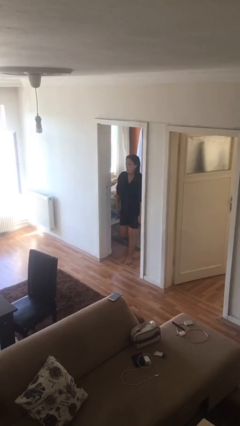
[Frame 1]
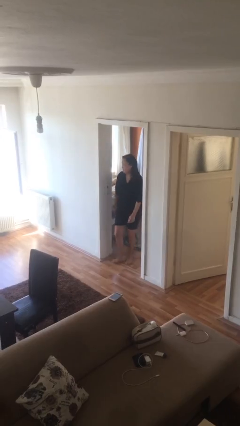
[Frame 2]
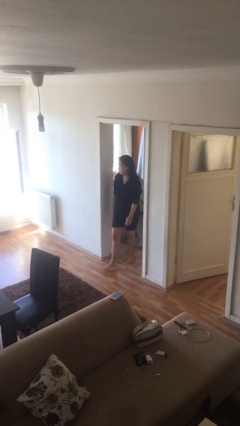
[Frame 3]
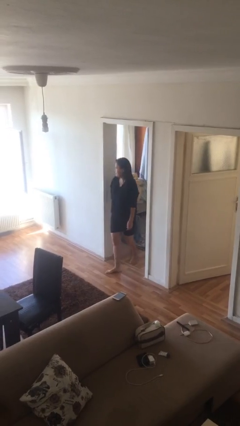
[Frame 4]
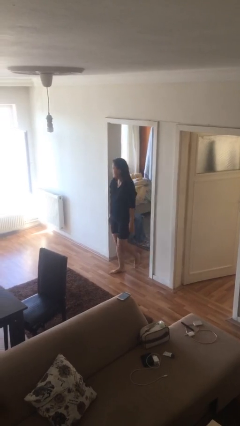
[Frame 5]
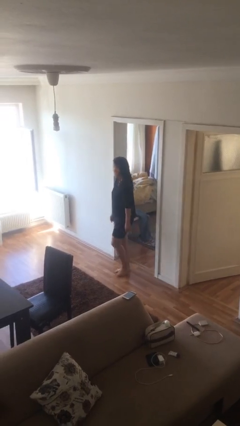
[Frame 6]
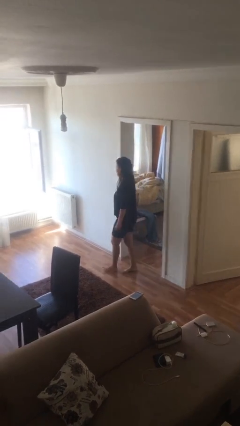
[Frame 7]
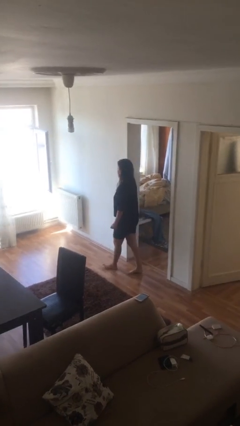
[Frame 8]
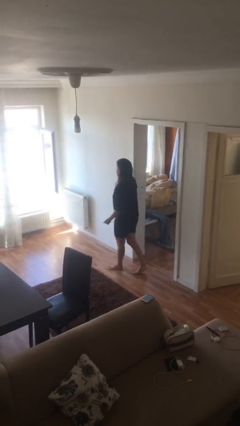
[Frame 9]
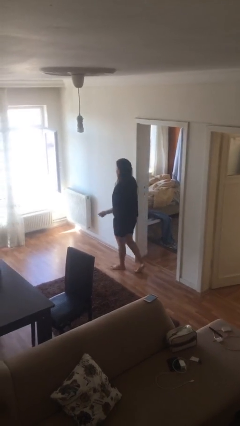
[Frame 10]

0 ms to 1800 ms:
person enters scene through structure

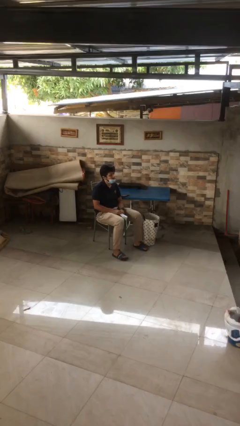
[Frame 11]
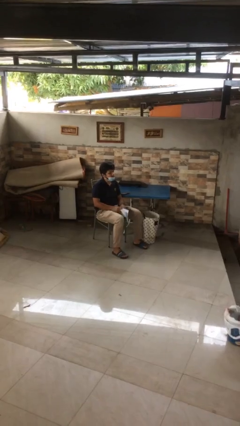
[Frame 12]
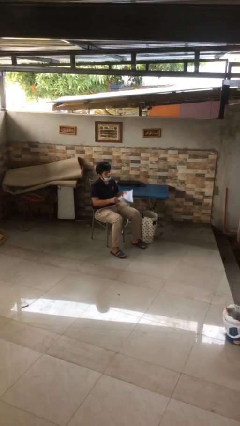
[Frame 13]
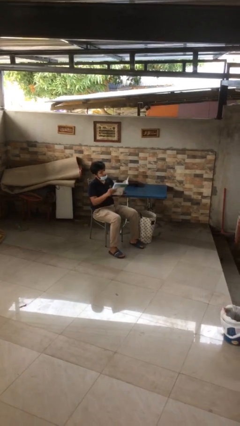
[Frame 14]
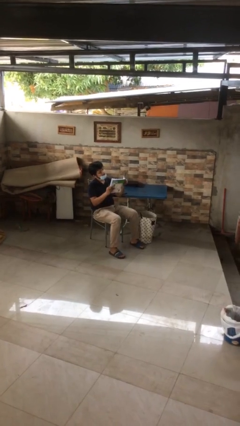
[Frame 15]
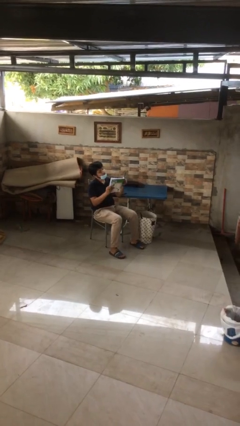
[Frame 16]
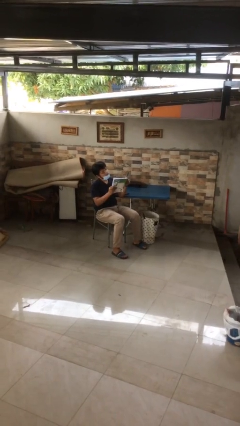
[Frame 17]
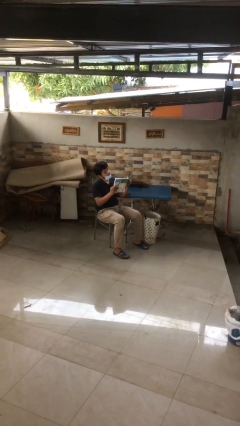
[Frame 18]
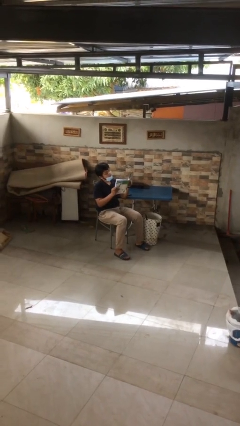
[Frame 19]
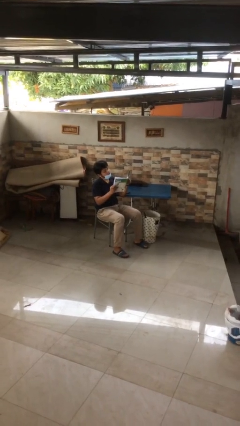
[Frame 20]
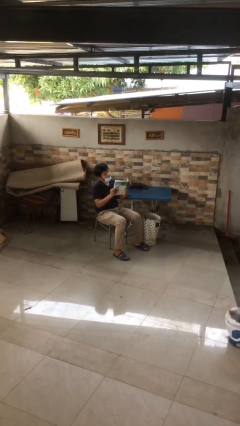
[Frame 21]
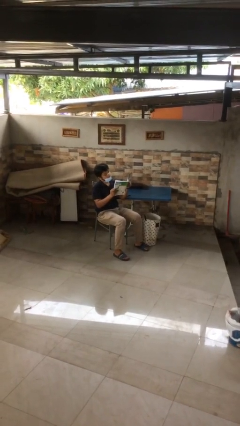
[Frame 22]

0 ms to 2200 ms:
person reads magazine

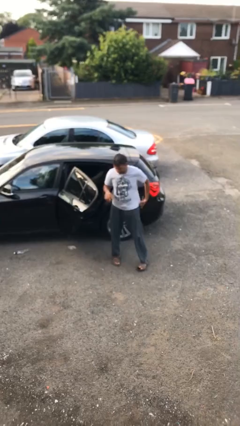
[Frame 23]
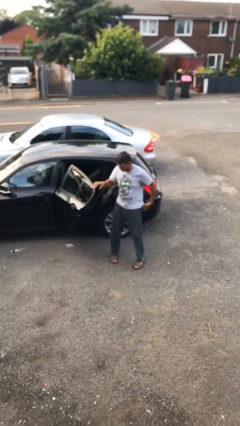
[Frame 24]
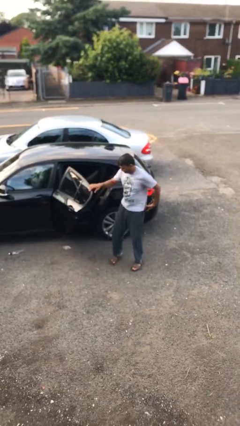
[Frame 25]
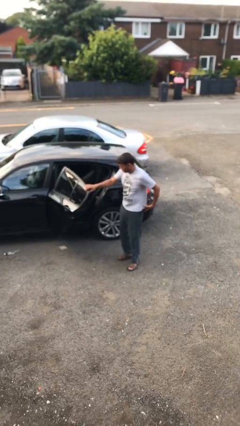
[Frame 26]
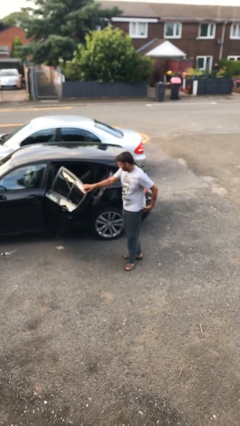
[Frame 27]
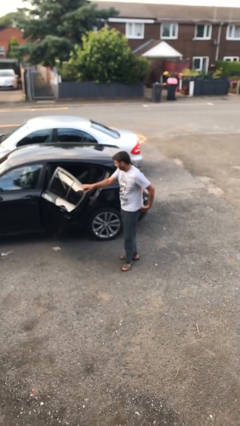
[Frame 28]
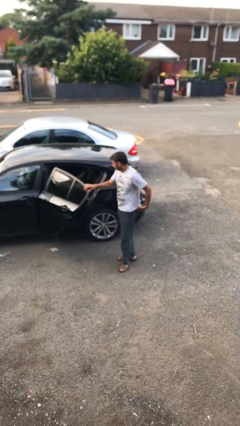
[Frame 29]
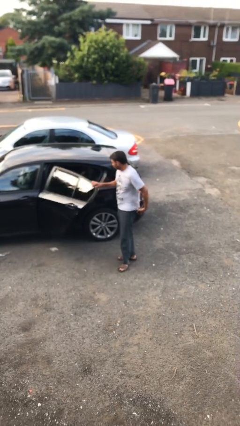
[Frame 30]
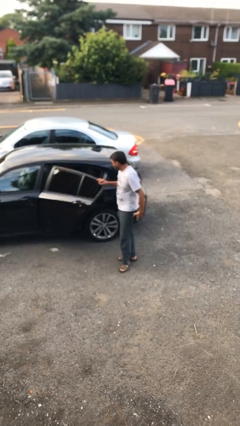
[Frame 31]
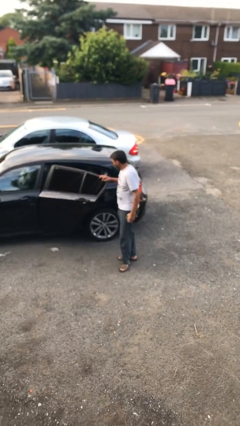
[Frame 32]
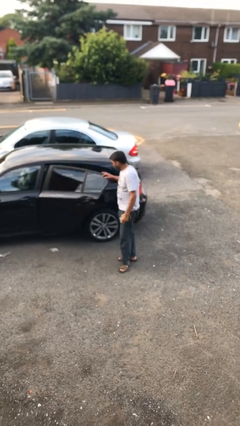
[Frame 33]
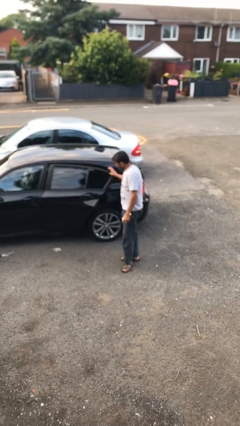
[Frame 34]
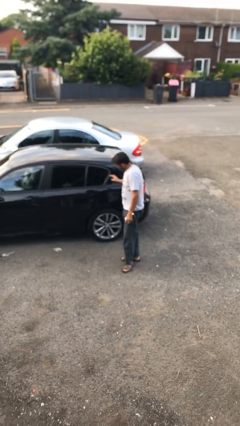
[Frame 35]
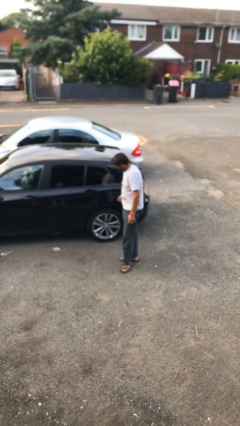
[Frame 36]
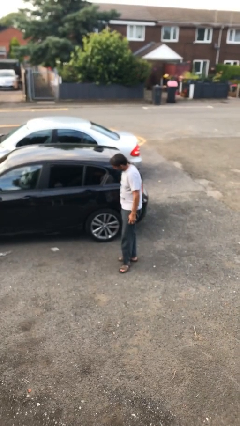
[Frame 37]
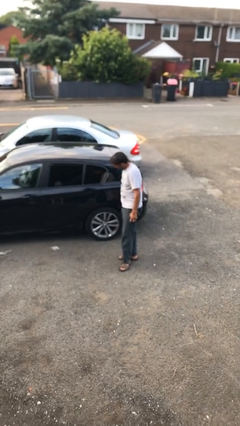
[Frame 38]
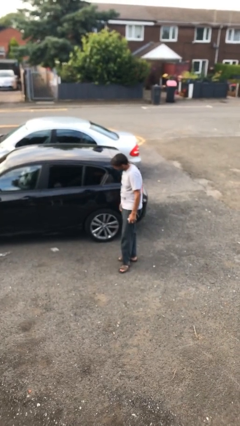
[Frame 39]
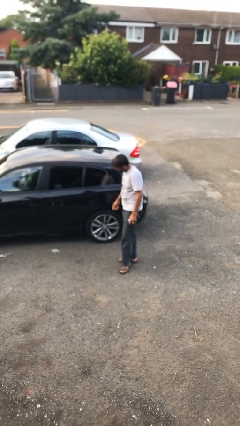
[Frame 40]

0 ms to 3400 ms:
person closes car door

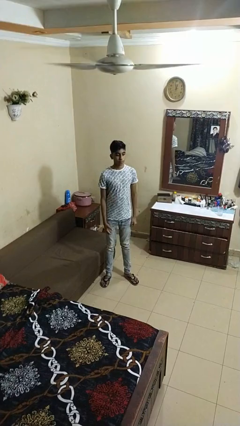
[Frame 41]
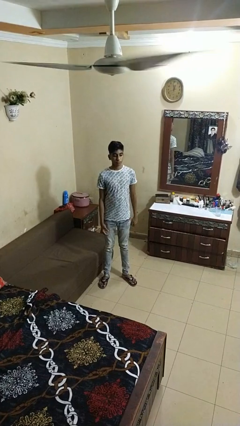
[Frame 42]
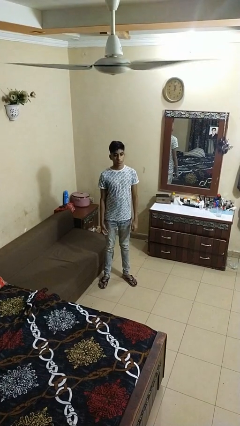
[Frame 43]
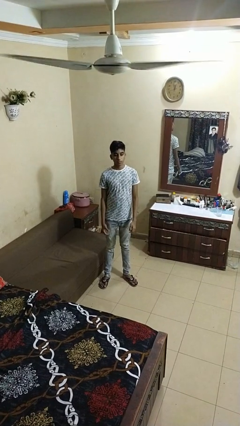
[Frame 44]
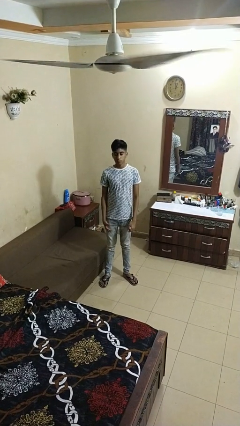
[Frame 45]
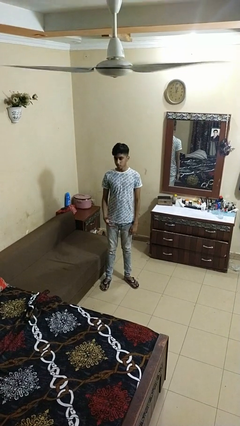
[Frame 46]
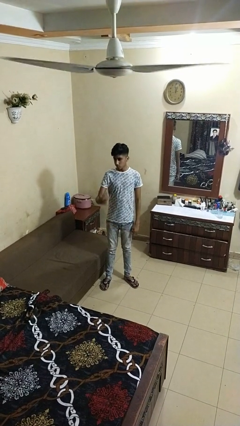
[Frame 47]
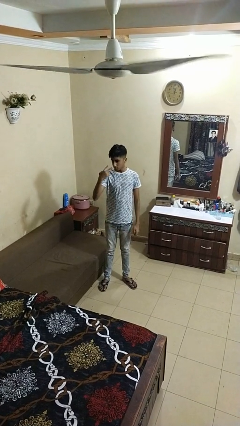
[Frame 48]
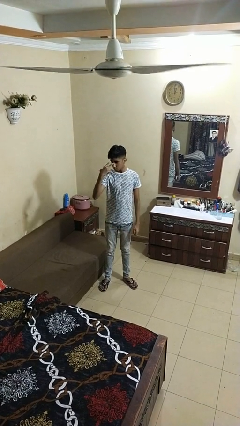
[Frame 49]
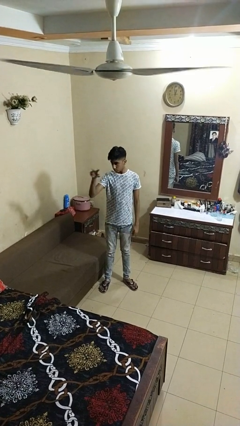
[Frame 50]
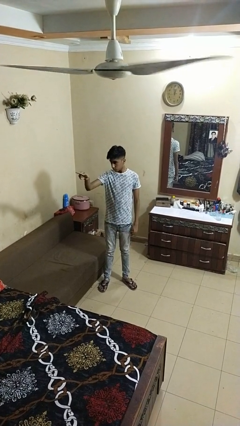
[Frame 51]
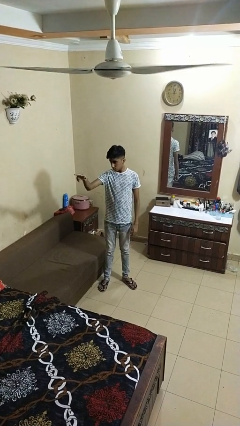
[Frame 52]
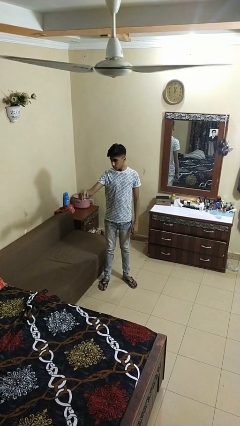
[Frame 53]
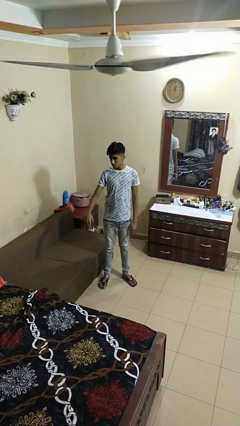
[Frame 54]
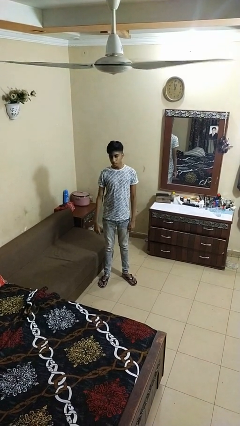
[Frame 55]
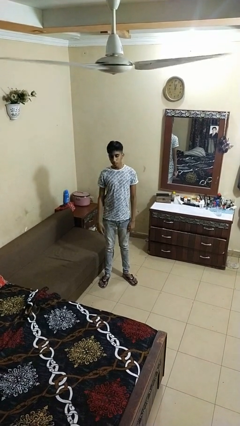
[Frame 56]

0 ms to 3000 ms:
person gestures watch closely

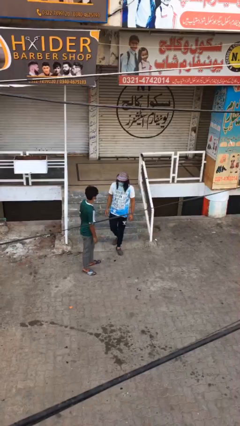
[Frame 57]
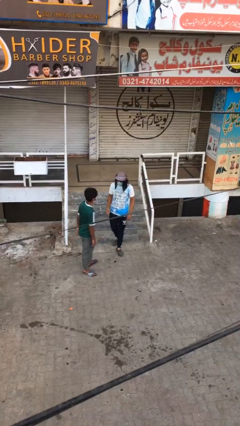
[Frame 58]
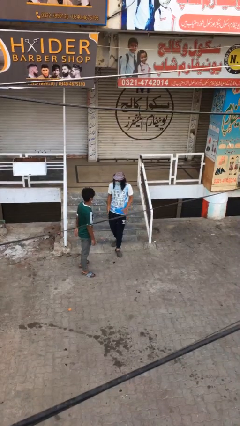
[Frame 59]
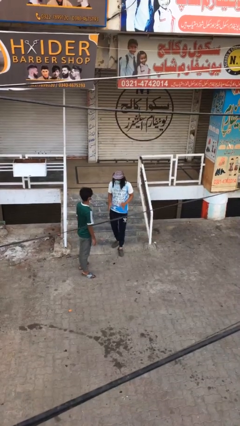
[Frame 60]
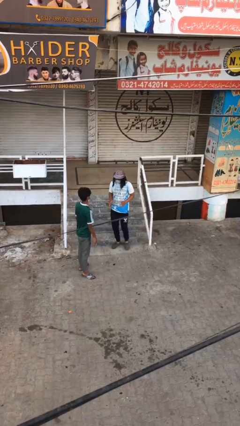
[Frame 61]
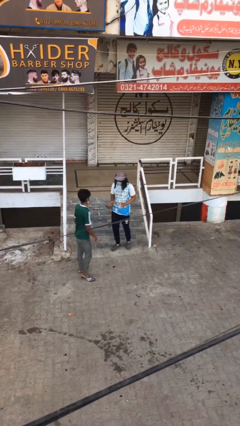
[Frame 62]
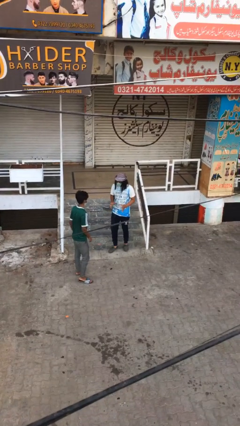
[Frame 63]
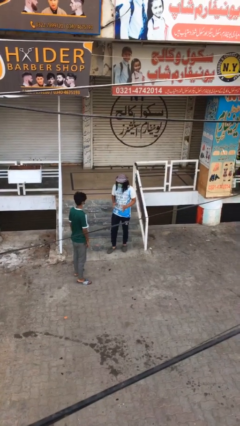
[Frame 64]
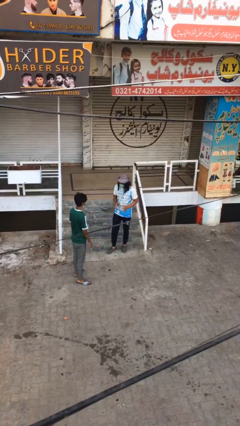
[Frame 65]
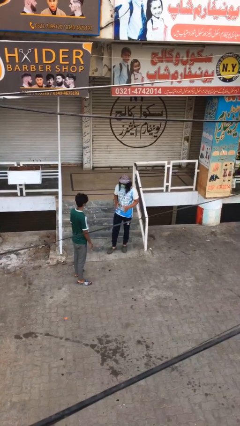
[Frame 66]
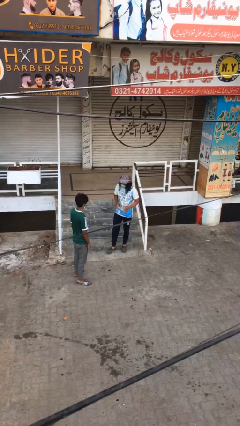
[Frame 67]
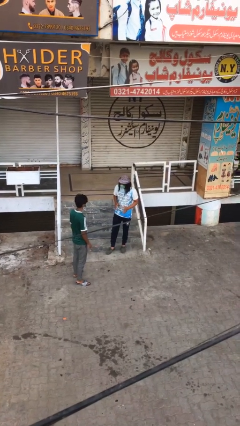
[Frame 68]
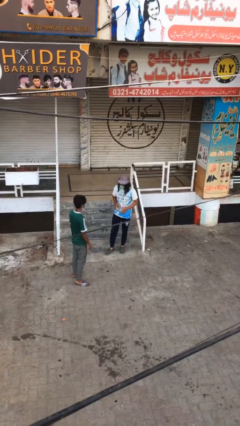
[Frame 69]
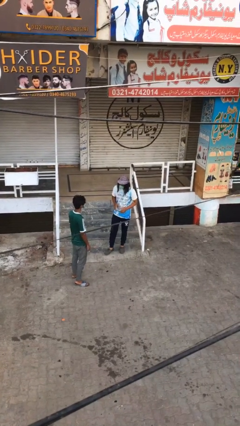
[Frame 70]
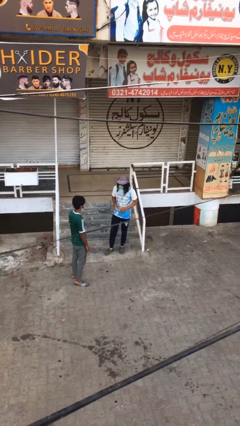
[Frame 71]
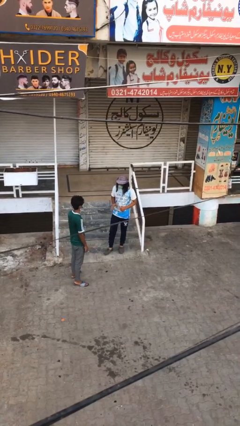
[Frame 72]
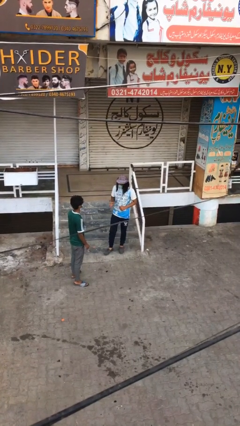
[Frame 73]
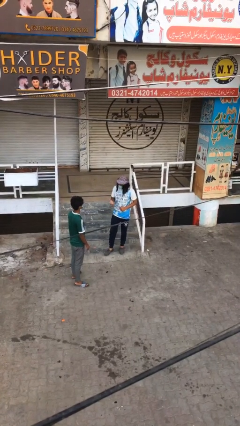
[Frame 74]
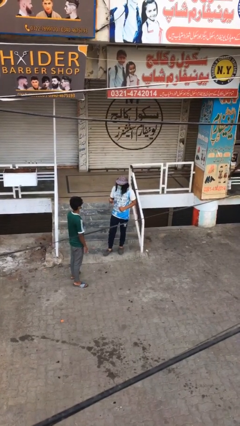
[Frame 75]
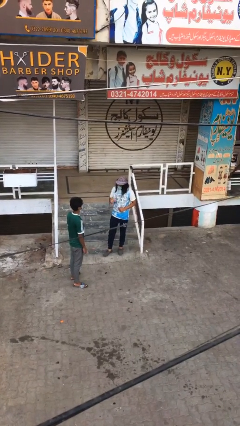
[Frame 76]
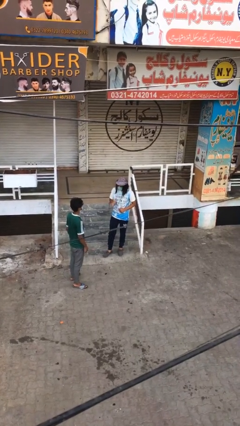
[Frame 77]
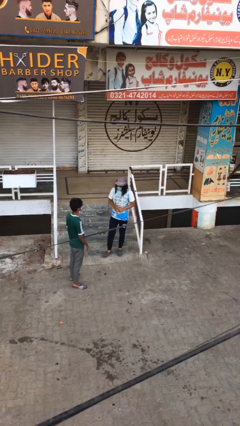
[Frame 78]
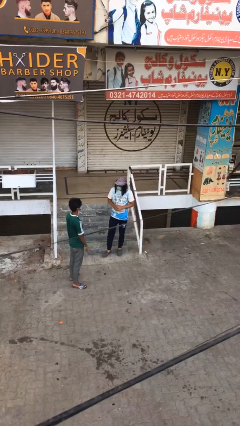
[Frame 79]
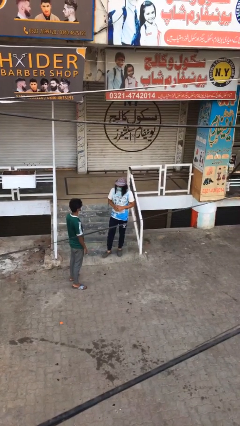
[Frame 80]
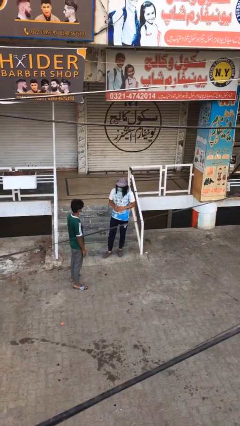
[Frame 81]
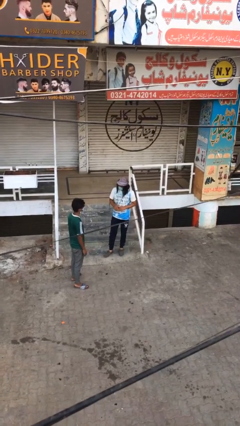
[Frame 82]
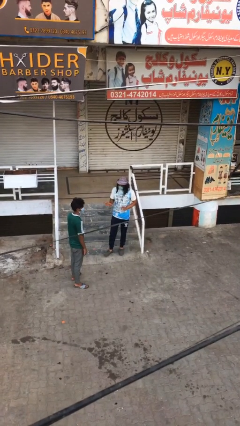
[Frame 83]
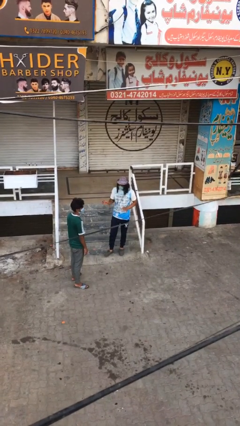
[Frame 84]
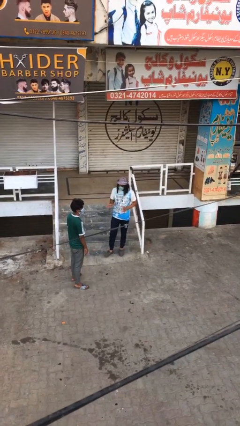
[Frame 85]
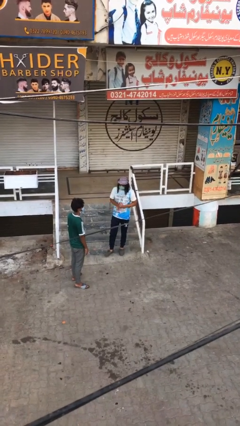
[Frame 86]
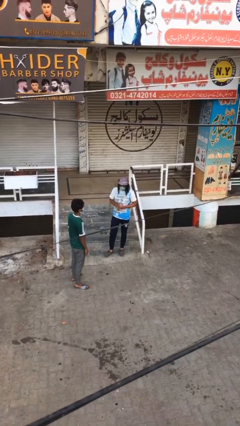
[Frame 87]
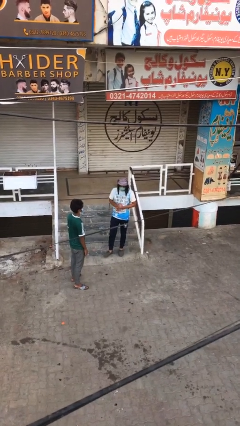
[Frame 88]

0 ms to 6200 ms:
person talks to person

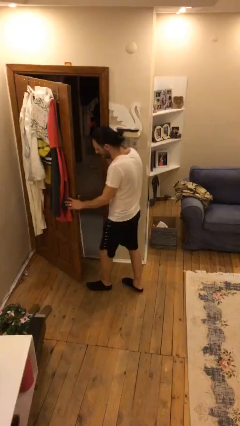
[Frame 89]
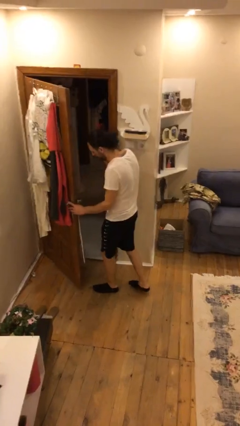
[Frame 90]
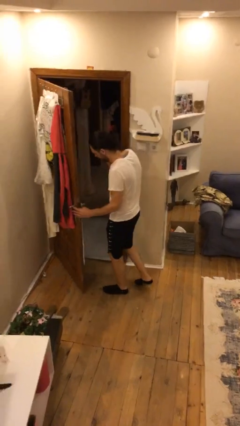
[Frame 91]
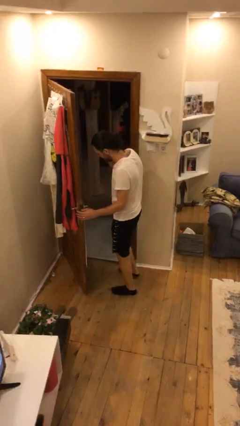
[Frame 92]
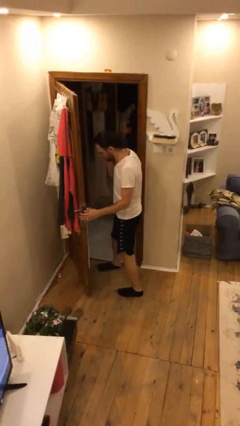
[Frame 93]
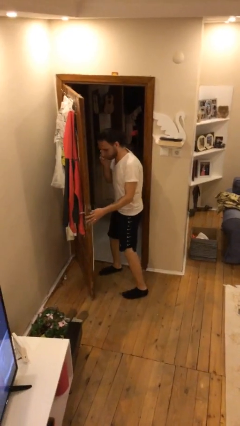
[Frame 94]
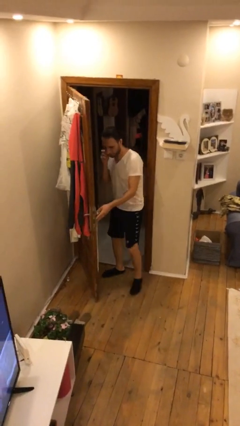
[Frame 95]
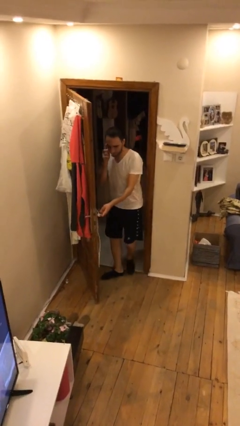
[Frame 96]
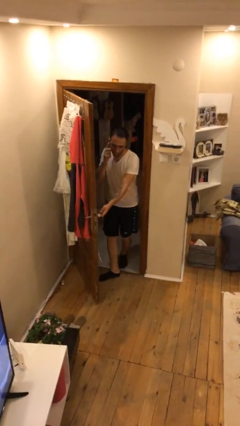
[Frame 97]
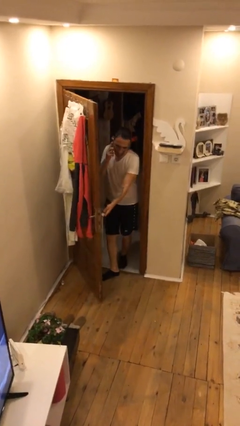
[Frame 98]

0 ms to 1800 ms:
person exits scene through structure
